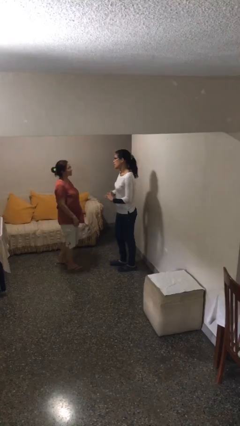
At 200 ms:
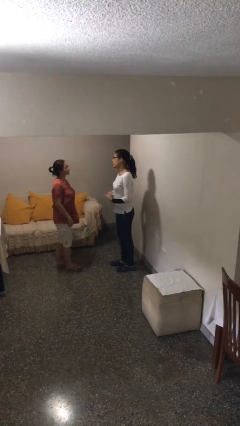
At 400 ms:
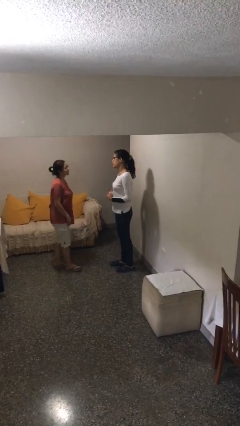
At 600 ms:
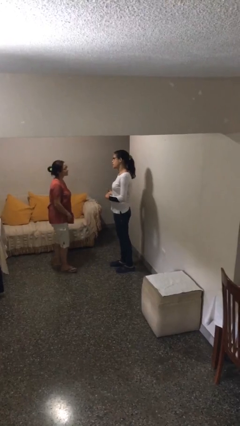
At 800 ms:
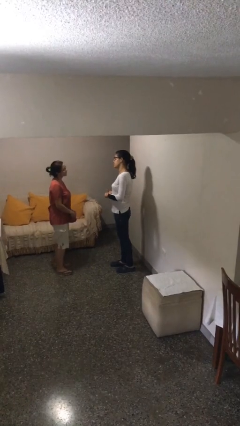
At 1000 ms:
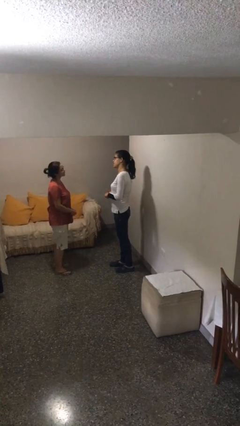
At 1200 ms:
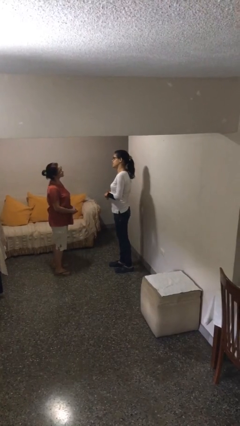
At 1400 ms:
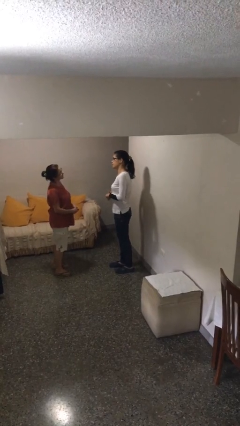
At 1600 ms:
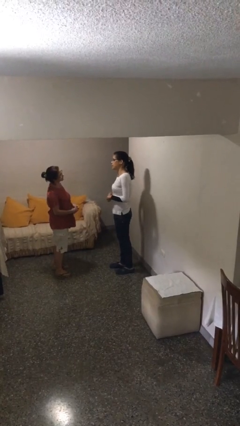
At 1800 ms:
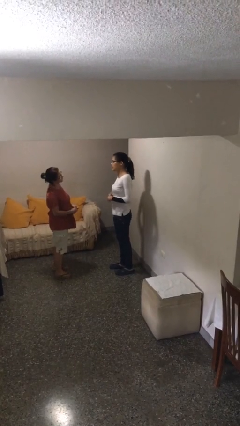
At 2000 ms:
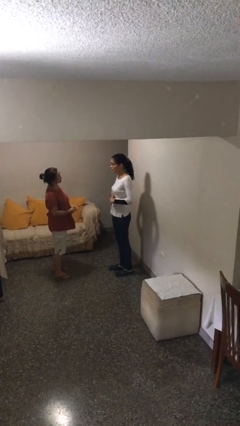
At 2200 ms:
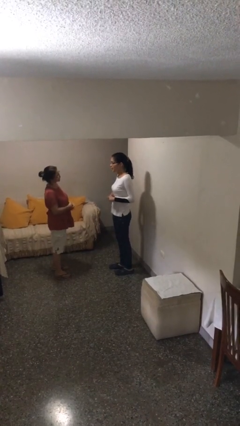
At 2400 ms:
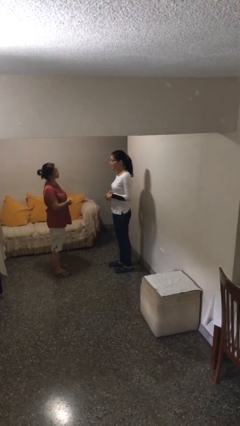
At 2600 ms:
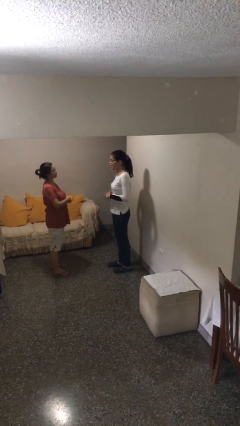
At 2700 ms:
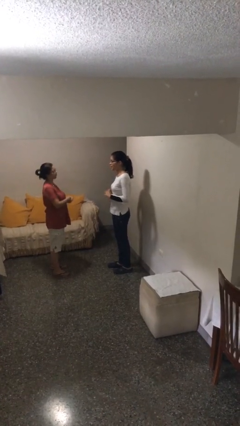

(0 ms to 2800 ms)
person talks to person

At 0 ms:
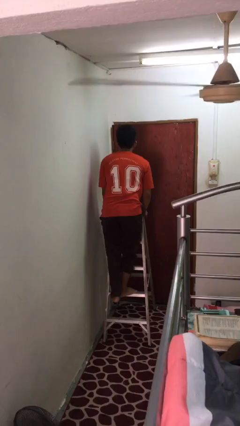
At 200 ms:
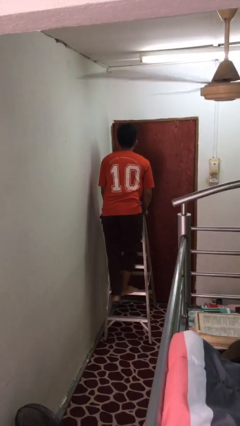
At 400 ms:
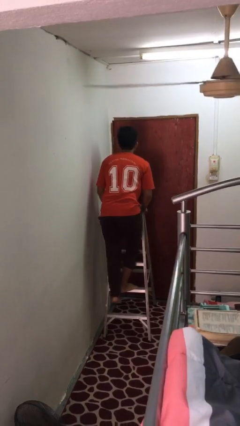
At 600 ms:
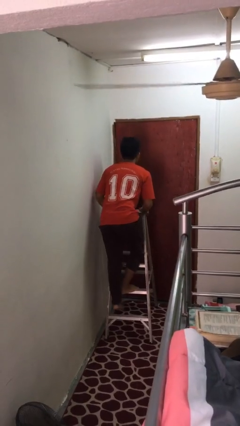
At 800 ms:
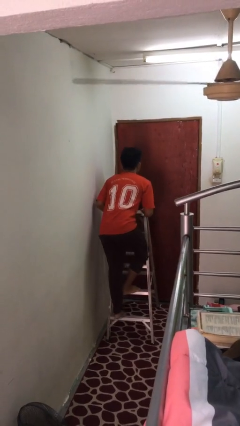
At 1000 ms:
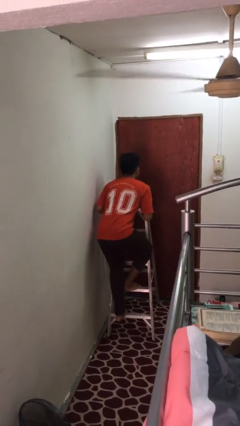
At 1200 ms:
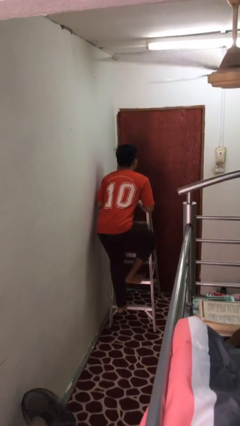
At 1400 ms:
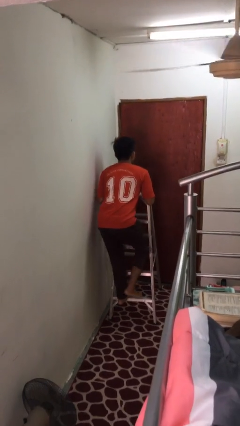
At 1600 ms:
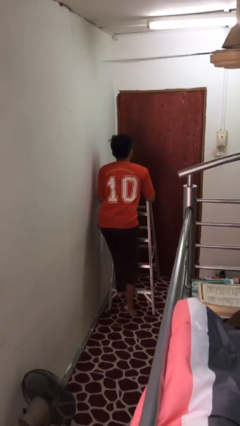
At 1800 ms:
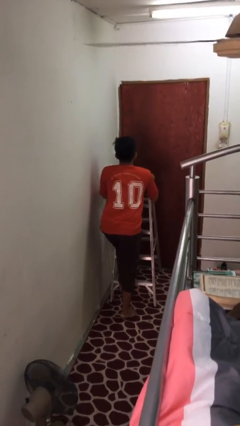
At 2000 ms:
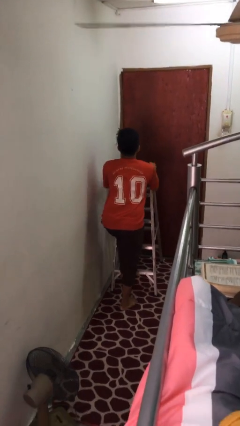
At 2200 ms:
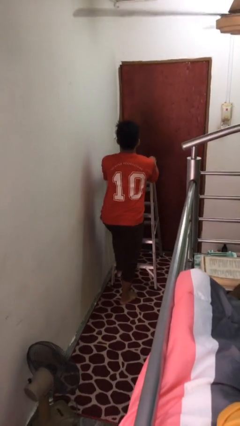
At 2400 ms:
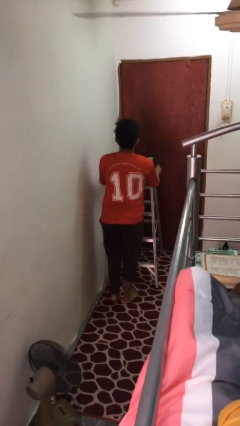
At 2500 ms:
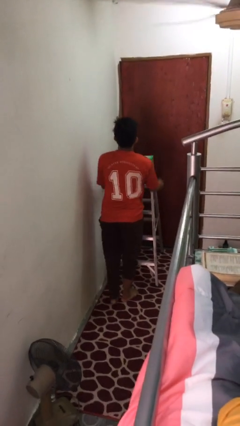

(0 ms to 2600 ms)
person climbs down ladder

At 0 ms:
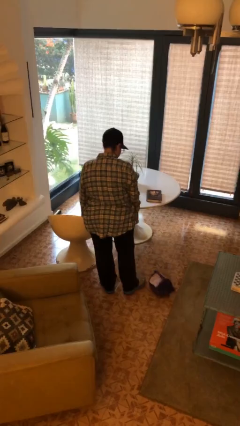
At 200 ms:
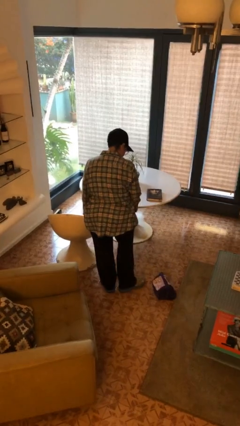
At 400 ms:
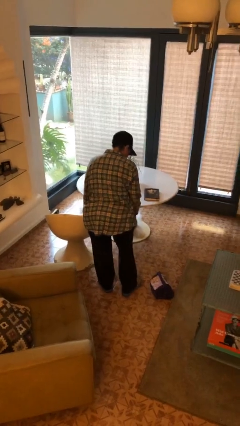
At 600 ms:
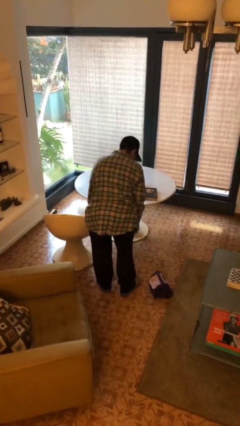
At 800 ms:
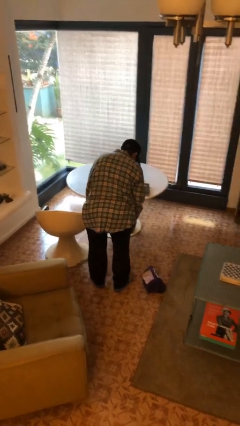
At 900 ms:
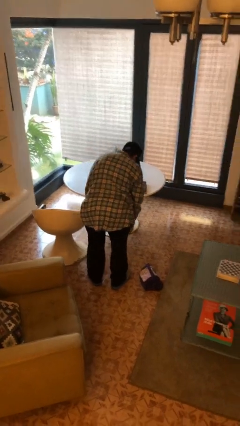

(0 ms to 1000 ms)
person drops object

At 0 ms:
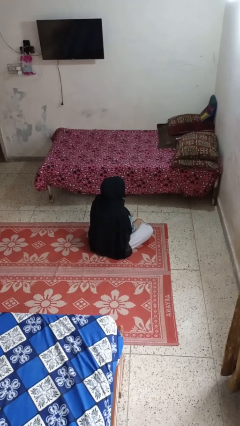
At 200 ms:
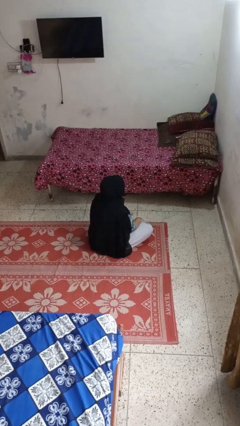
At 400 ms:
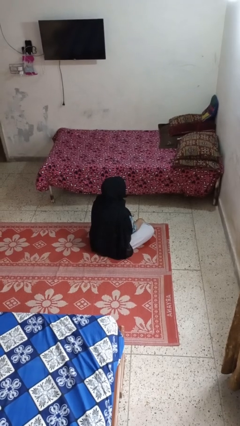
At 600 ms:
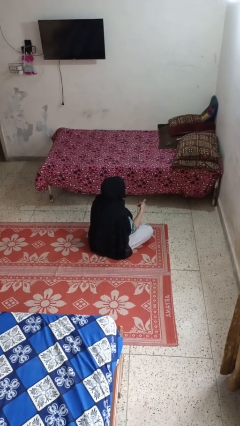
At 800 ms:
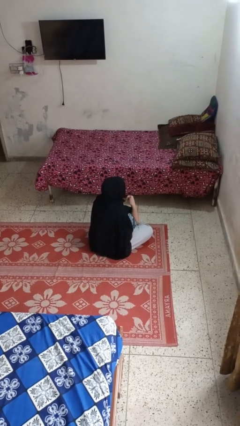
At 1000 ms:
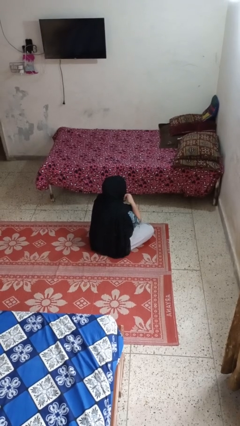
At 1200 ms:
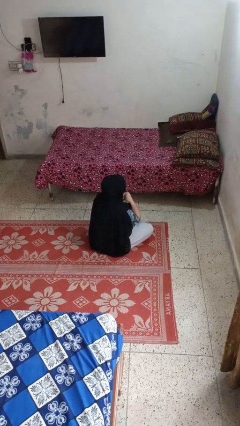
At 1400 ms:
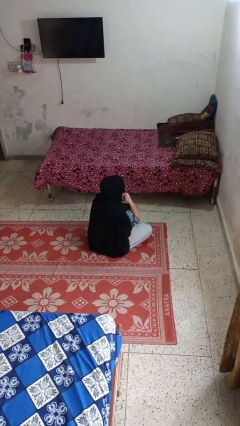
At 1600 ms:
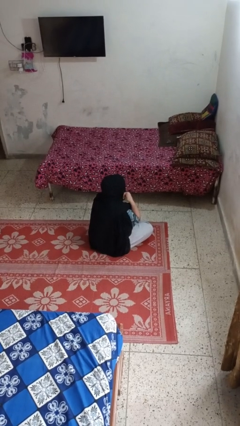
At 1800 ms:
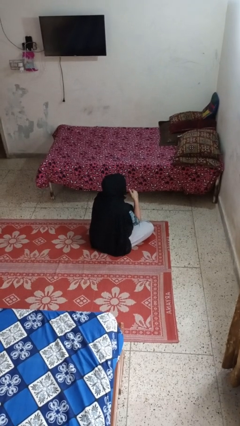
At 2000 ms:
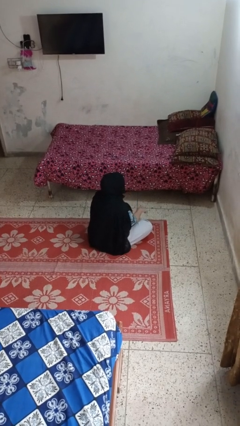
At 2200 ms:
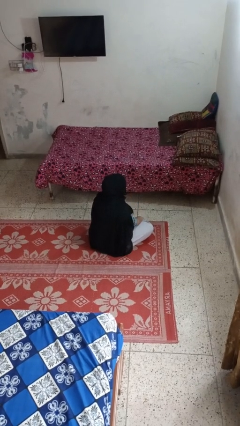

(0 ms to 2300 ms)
person gestures call me

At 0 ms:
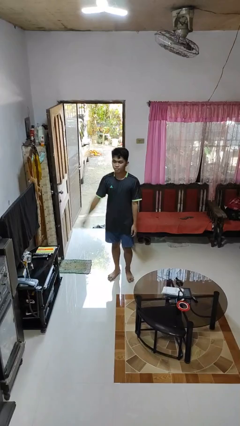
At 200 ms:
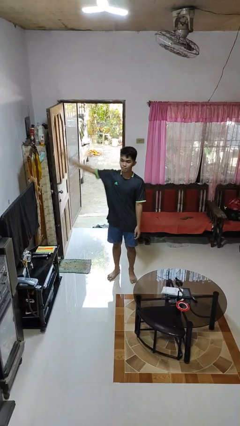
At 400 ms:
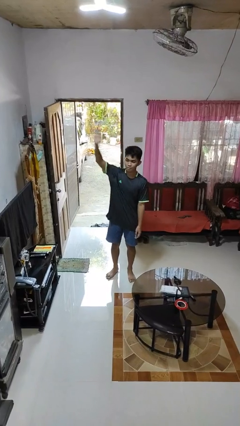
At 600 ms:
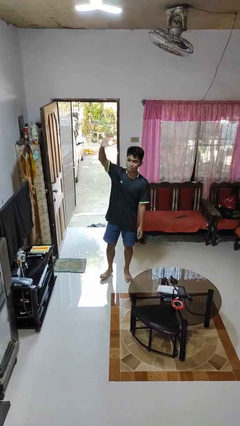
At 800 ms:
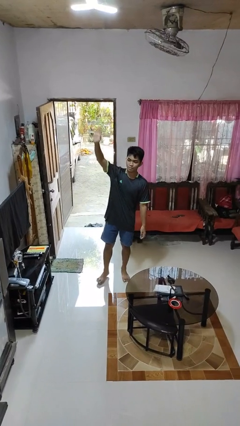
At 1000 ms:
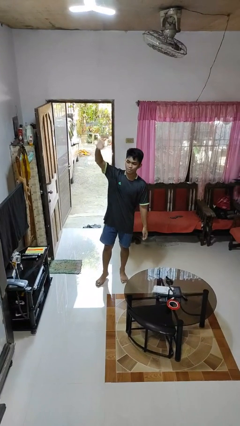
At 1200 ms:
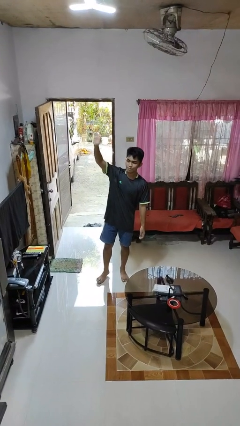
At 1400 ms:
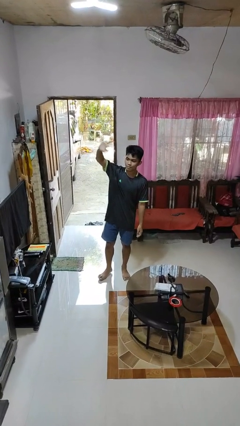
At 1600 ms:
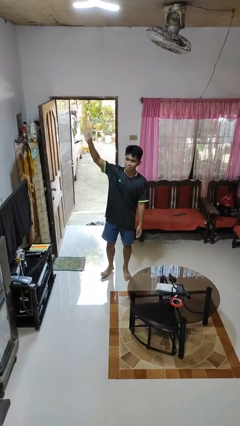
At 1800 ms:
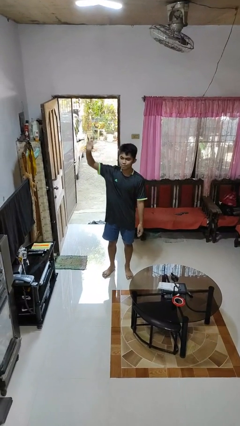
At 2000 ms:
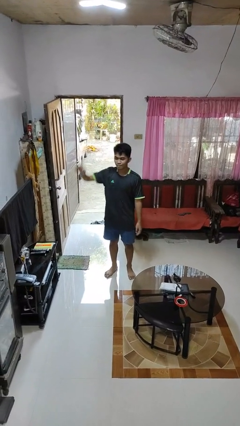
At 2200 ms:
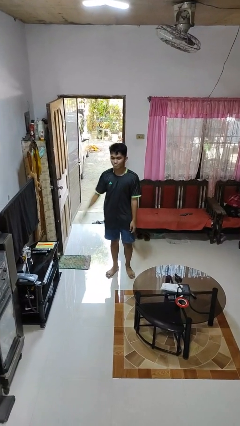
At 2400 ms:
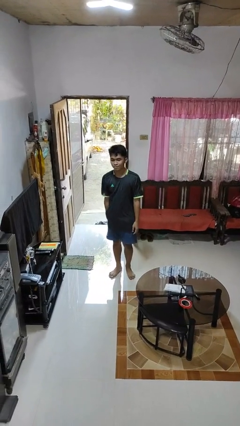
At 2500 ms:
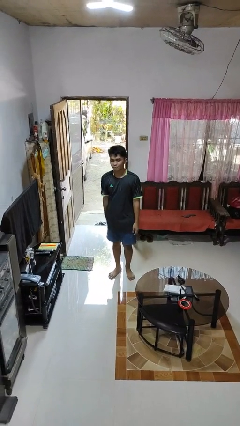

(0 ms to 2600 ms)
person waves at person

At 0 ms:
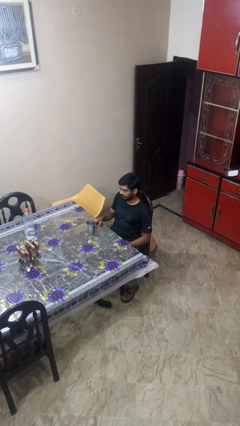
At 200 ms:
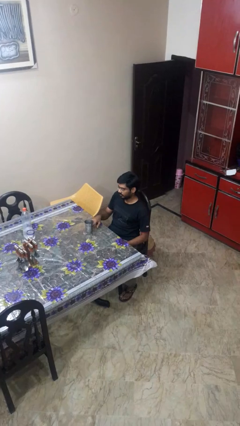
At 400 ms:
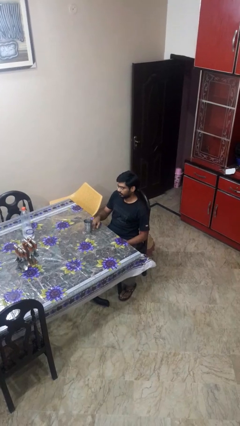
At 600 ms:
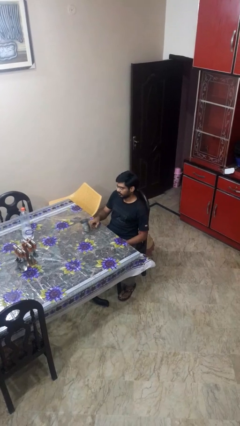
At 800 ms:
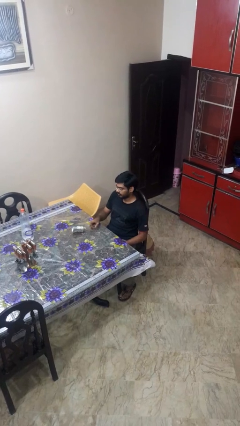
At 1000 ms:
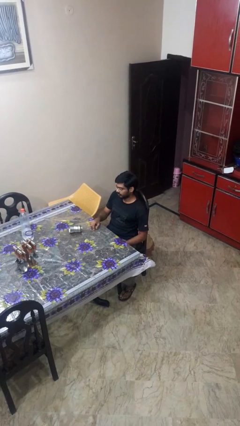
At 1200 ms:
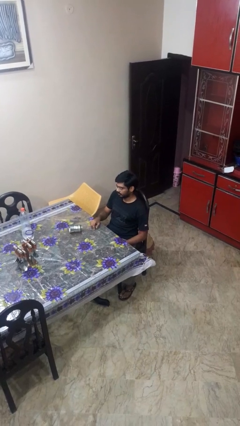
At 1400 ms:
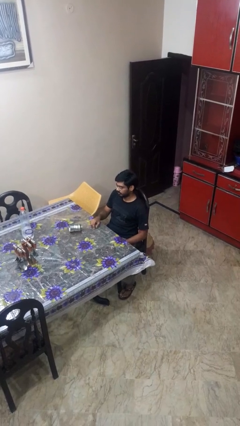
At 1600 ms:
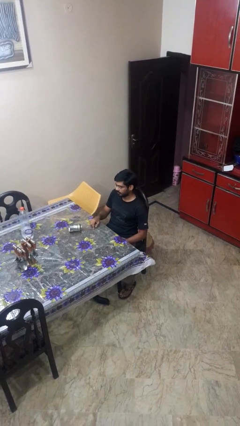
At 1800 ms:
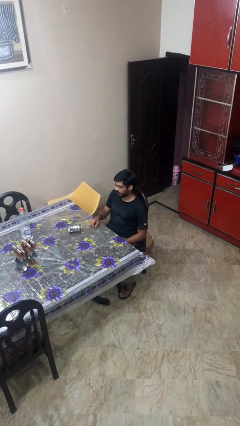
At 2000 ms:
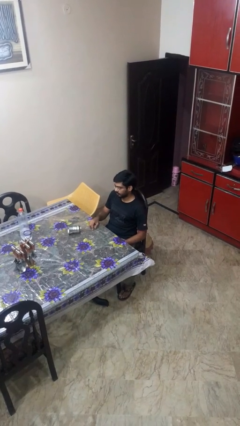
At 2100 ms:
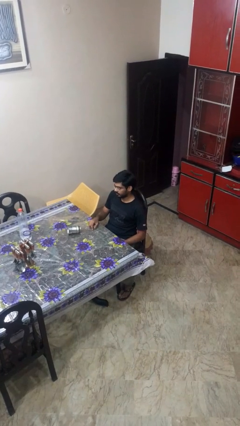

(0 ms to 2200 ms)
person knocks over glass

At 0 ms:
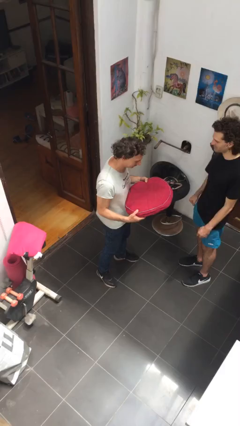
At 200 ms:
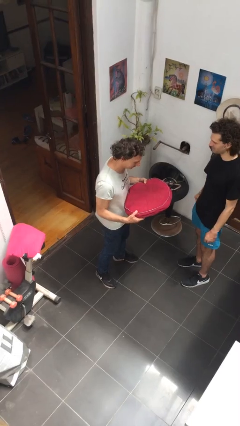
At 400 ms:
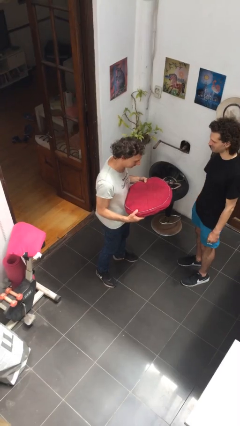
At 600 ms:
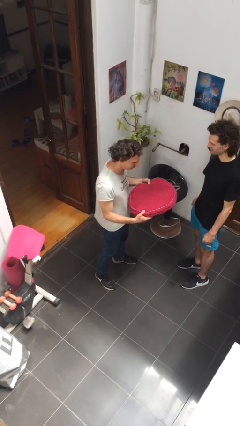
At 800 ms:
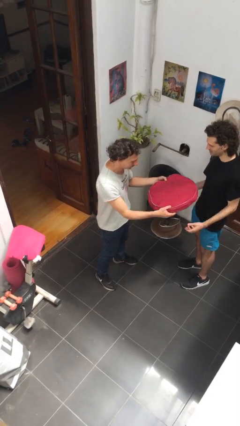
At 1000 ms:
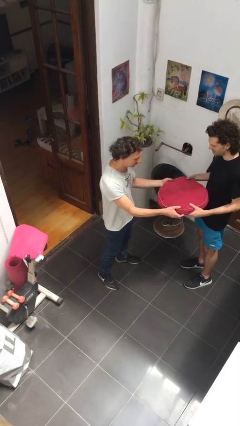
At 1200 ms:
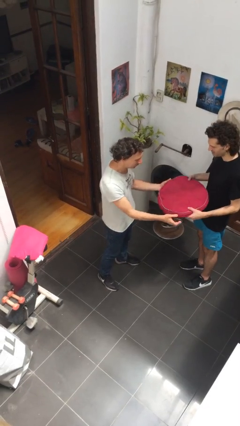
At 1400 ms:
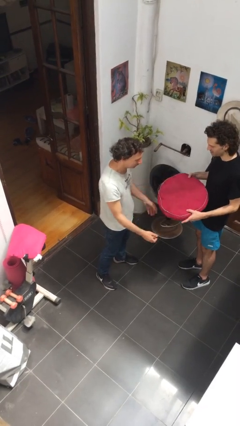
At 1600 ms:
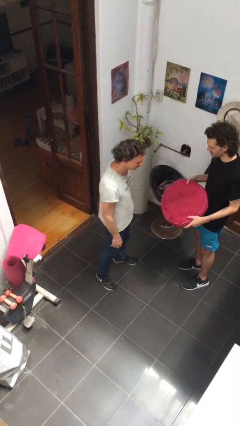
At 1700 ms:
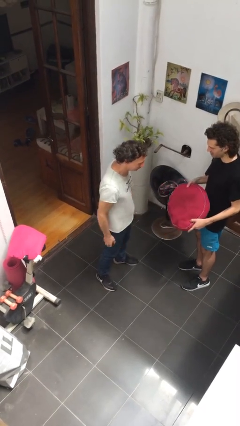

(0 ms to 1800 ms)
person transfers object to person

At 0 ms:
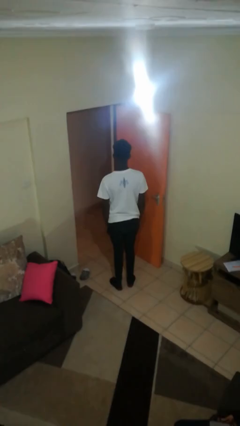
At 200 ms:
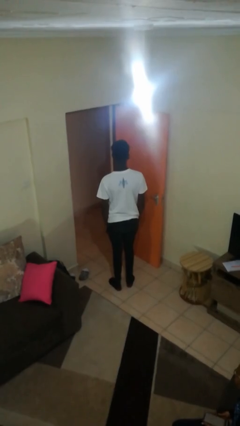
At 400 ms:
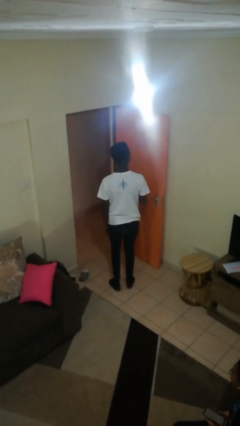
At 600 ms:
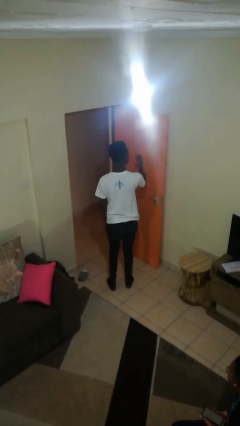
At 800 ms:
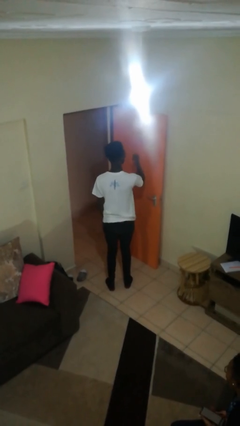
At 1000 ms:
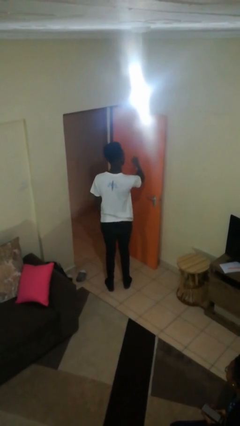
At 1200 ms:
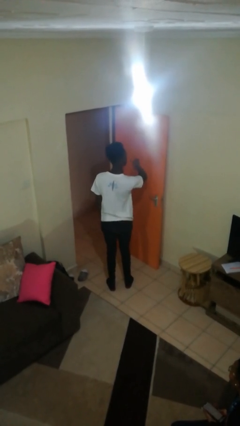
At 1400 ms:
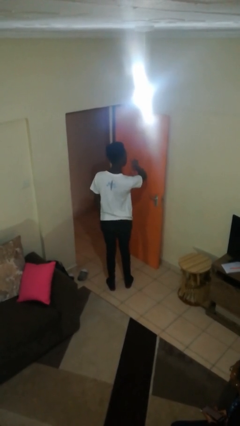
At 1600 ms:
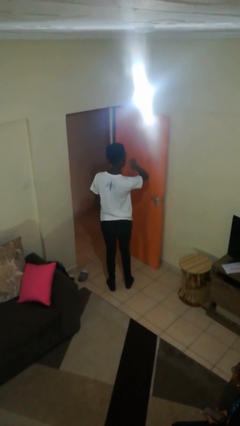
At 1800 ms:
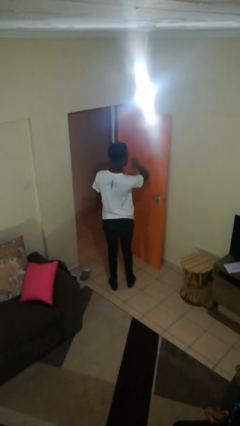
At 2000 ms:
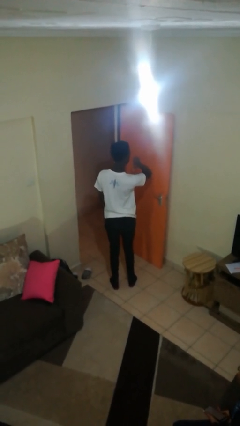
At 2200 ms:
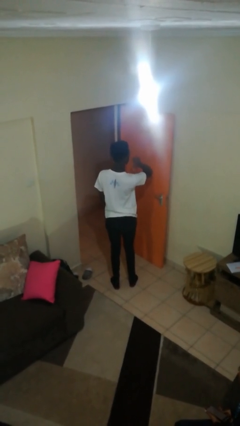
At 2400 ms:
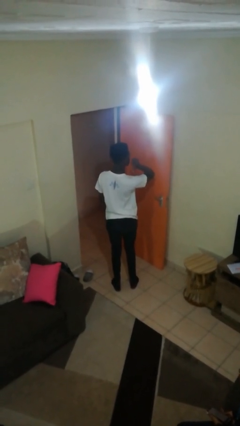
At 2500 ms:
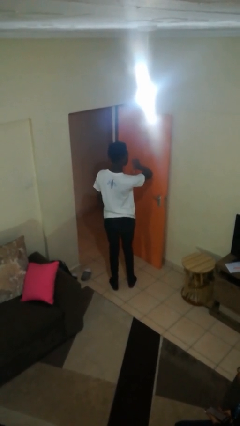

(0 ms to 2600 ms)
person gestures behind me
